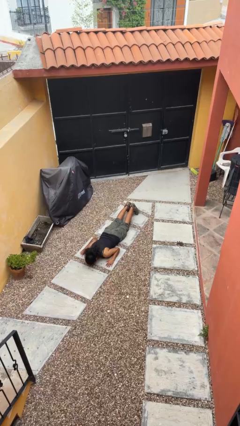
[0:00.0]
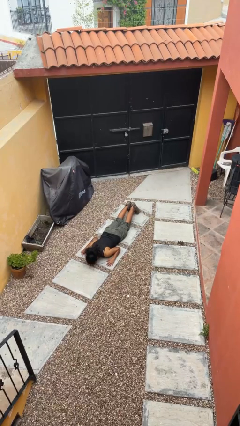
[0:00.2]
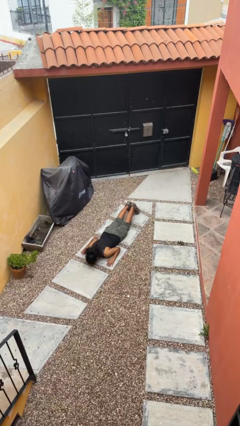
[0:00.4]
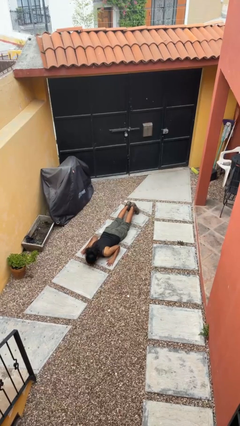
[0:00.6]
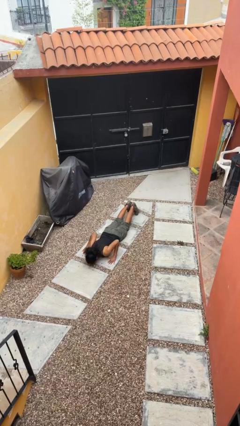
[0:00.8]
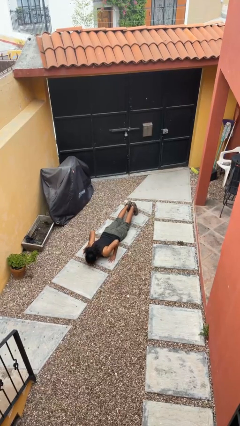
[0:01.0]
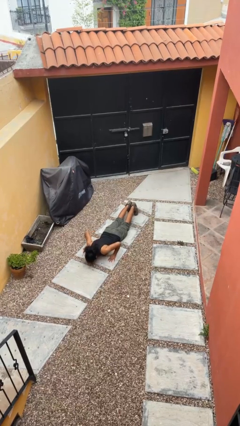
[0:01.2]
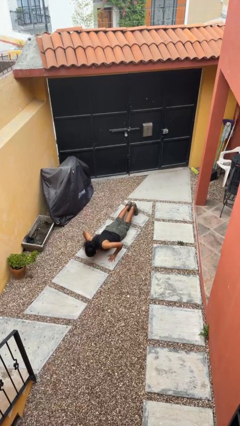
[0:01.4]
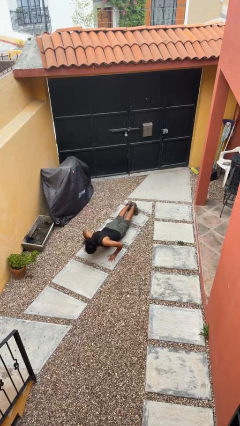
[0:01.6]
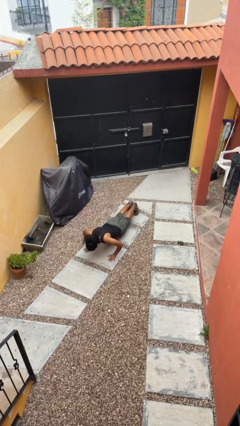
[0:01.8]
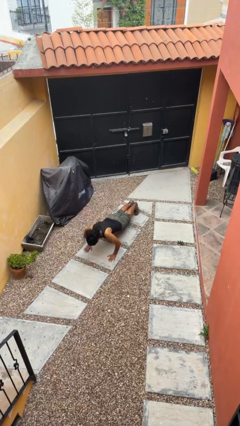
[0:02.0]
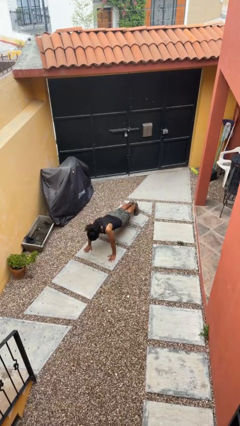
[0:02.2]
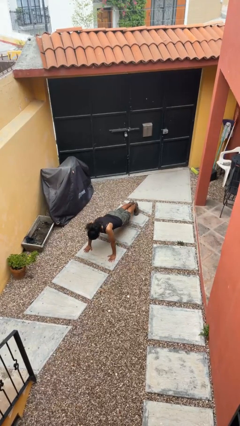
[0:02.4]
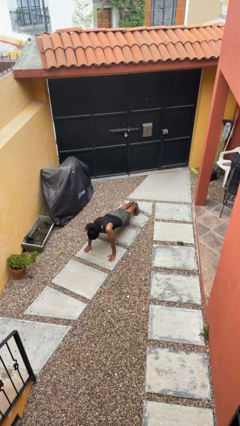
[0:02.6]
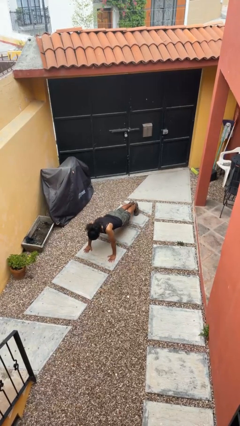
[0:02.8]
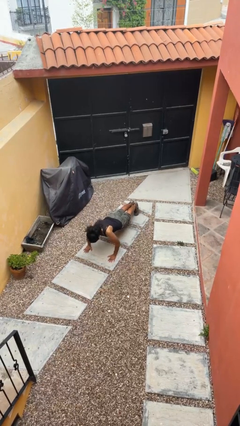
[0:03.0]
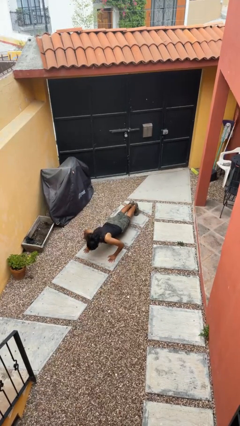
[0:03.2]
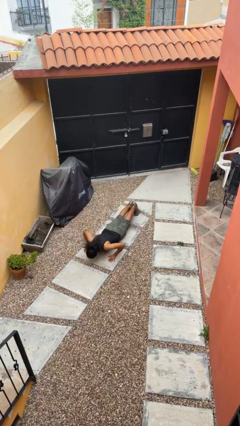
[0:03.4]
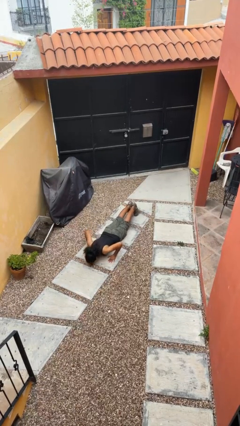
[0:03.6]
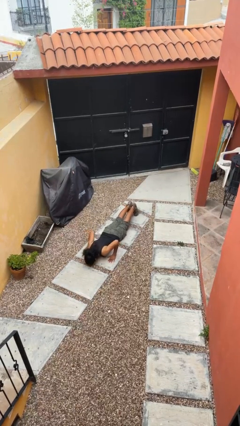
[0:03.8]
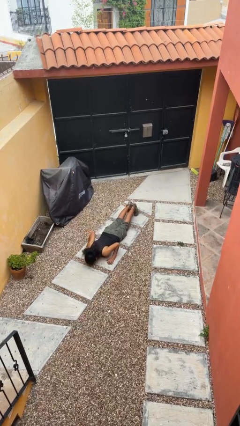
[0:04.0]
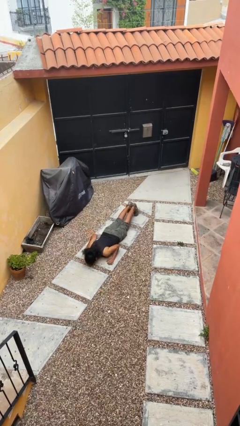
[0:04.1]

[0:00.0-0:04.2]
person exercises with pushup

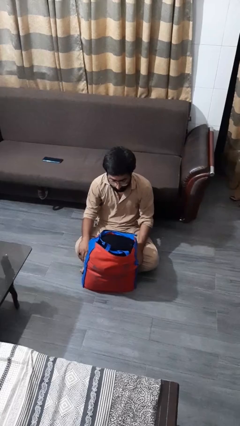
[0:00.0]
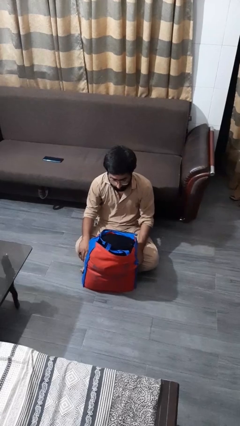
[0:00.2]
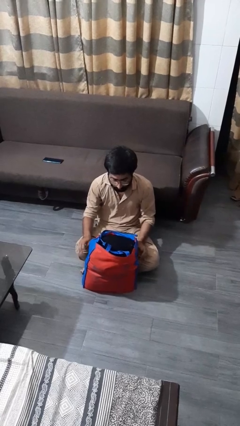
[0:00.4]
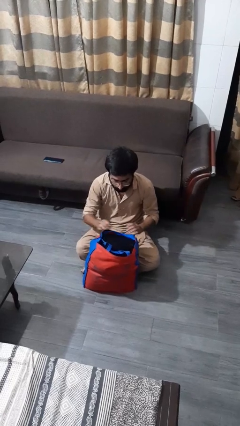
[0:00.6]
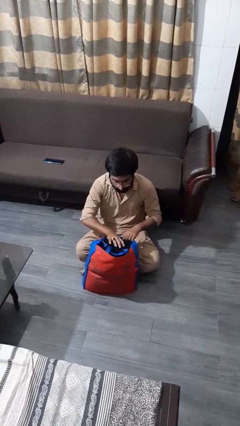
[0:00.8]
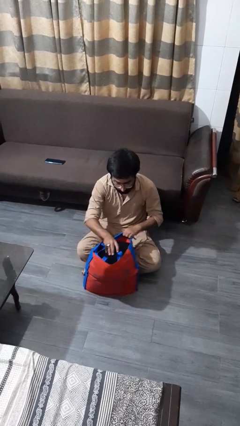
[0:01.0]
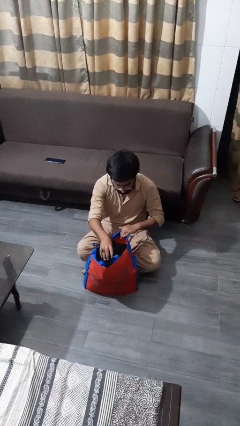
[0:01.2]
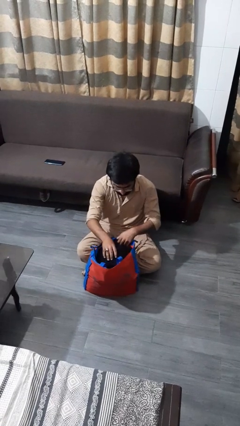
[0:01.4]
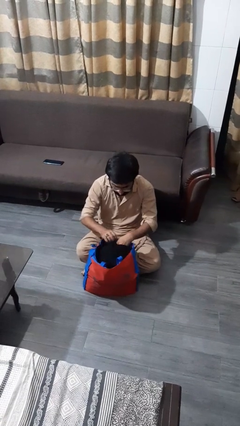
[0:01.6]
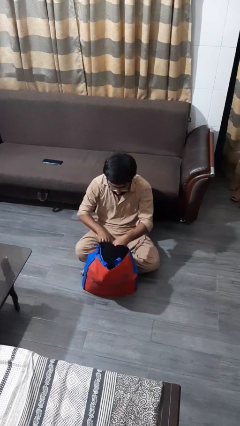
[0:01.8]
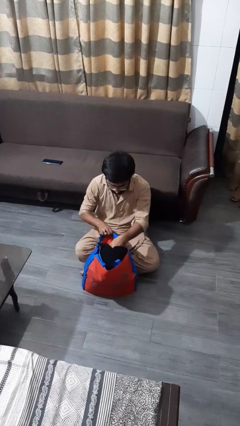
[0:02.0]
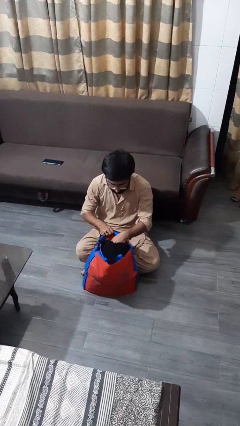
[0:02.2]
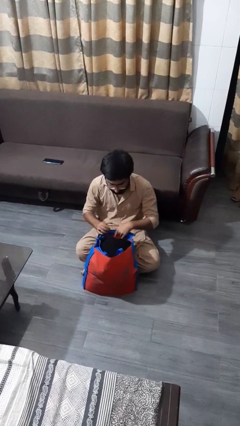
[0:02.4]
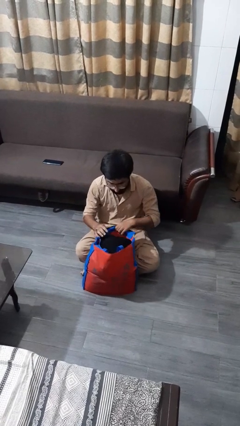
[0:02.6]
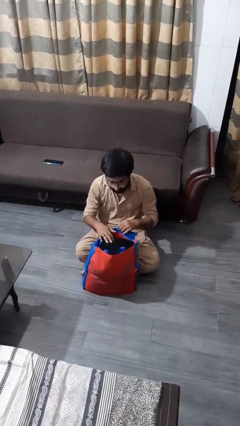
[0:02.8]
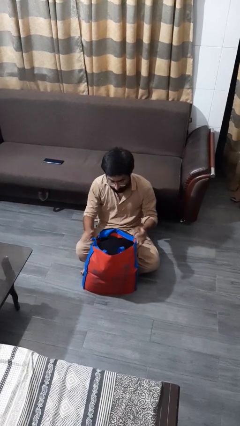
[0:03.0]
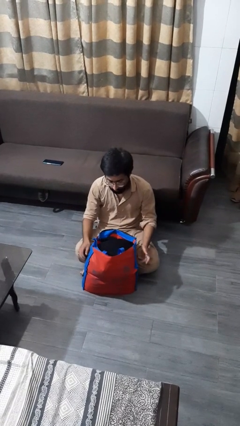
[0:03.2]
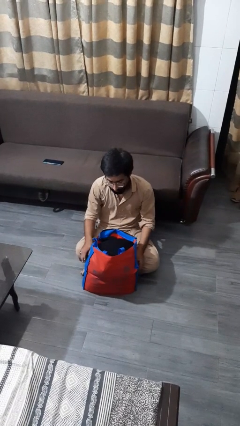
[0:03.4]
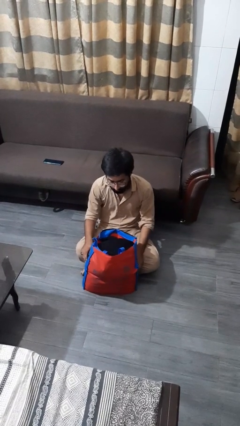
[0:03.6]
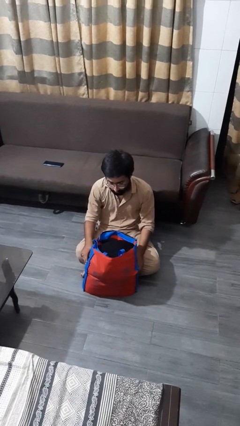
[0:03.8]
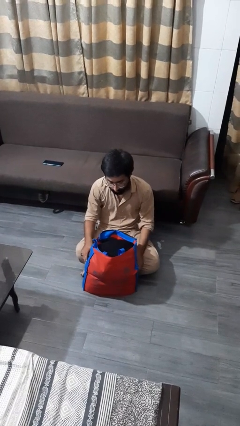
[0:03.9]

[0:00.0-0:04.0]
person searches in bag

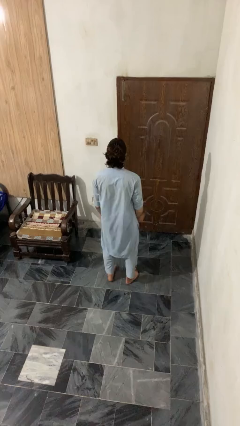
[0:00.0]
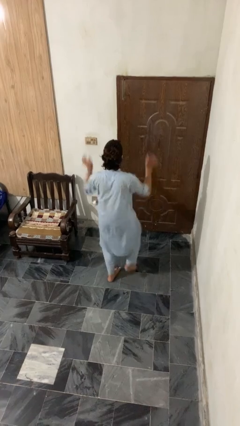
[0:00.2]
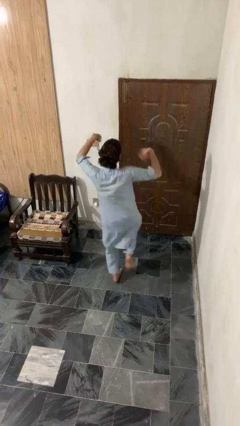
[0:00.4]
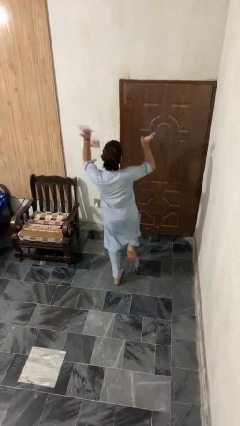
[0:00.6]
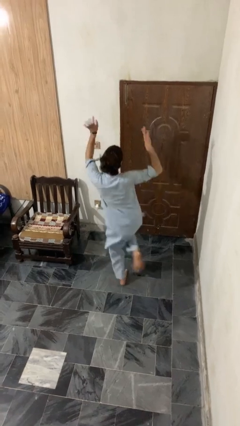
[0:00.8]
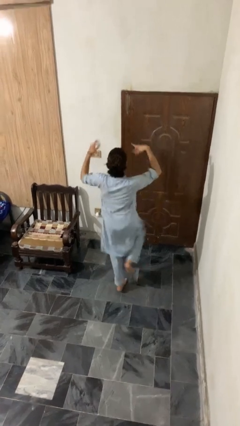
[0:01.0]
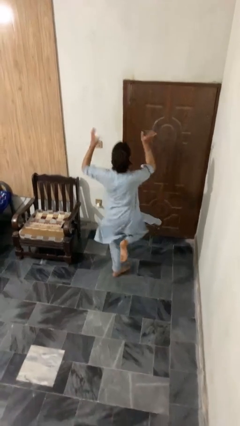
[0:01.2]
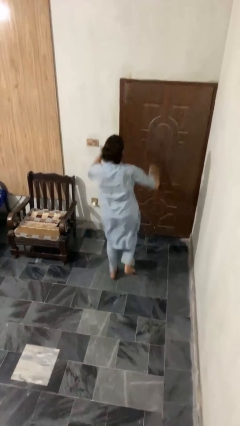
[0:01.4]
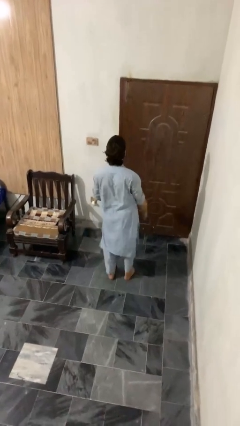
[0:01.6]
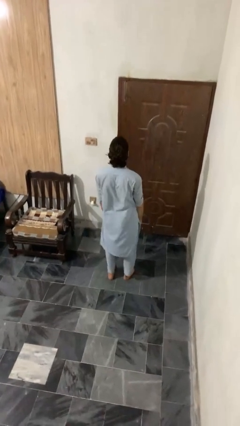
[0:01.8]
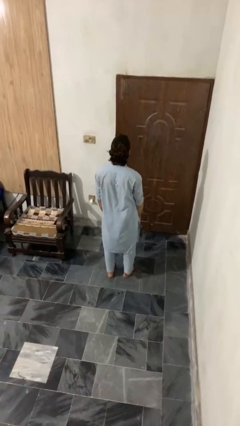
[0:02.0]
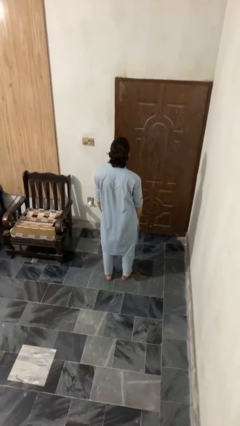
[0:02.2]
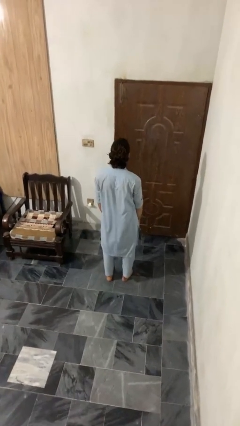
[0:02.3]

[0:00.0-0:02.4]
person dances in place

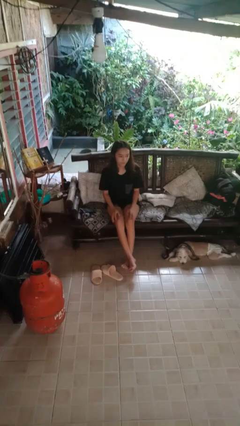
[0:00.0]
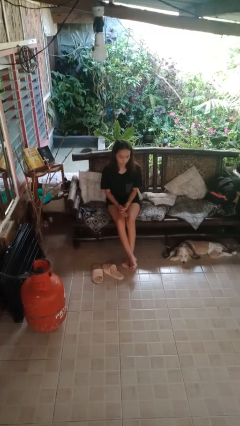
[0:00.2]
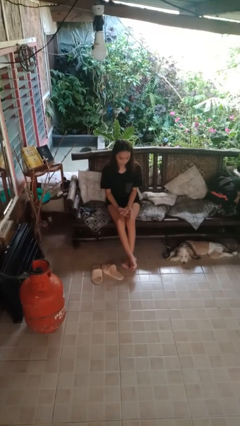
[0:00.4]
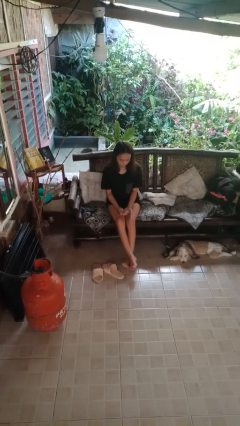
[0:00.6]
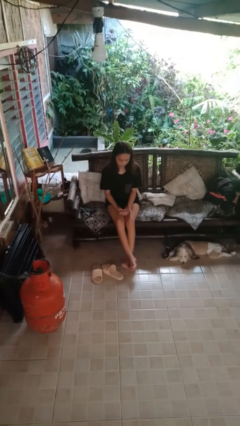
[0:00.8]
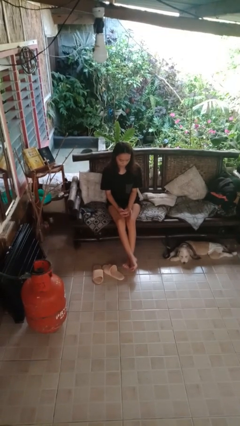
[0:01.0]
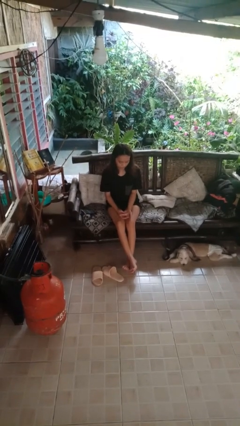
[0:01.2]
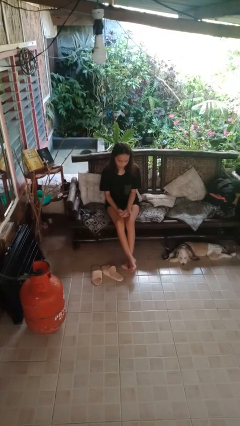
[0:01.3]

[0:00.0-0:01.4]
person looks at hands in lap

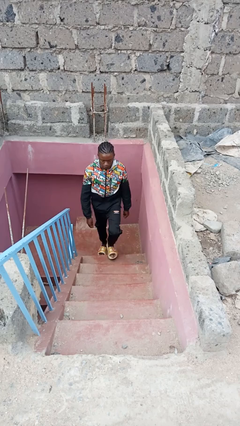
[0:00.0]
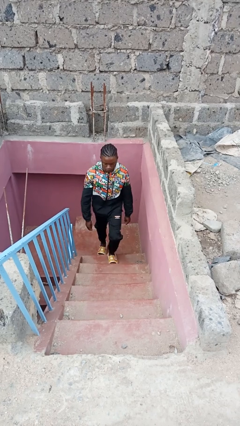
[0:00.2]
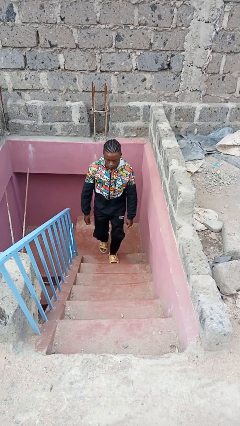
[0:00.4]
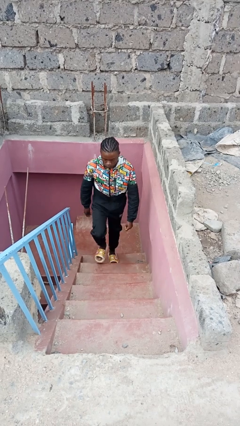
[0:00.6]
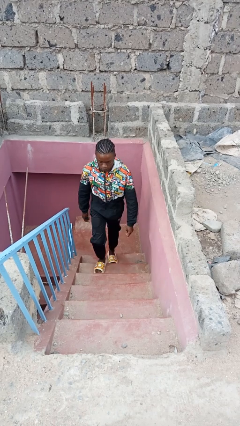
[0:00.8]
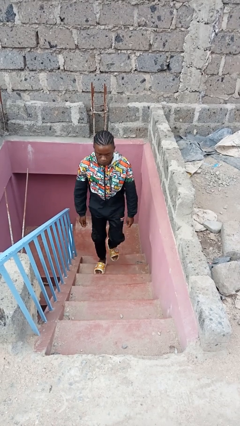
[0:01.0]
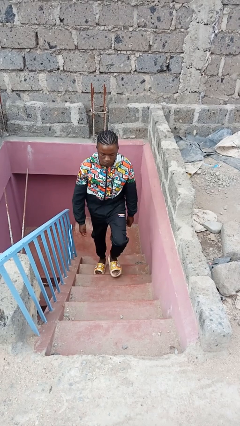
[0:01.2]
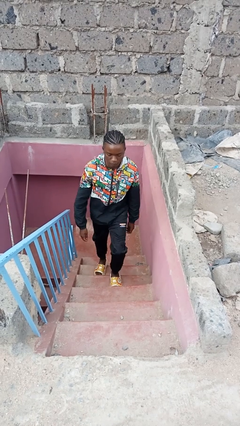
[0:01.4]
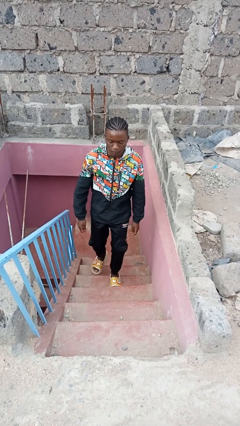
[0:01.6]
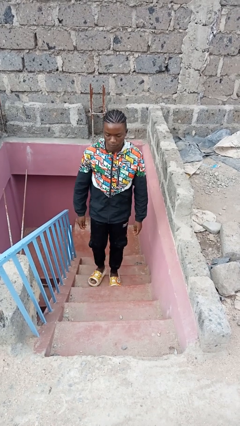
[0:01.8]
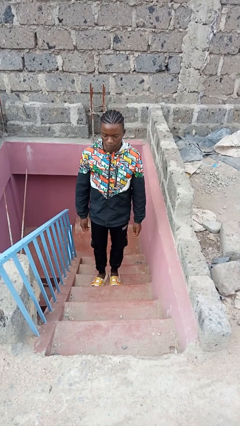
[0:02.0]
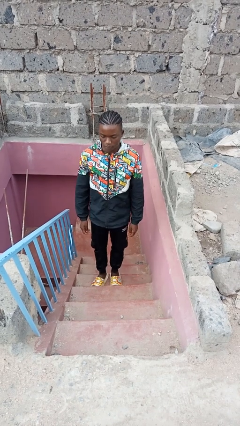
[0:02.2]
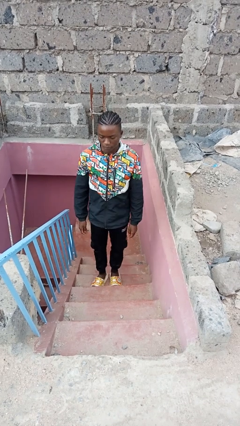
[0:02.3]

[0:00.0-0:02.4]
person climbs up stairs

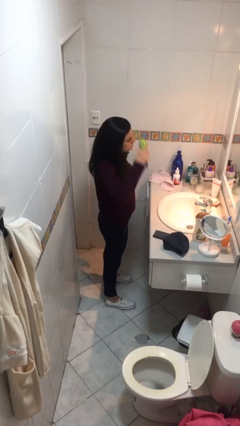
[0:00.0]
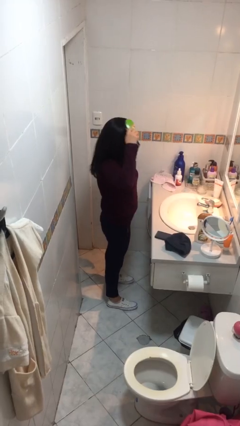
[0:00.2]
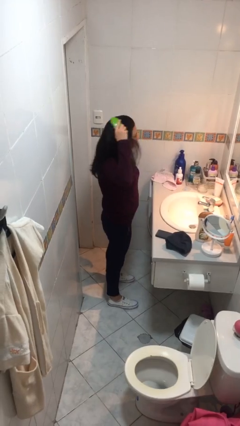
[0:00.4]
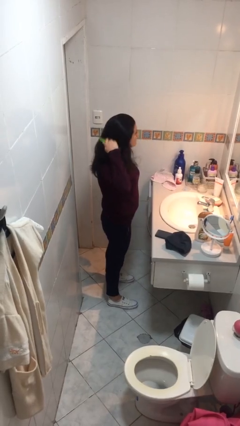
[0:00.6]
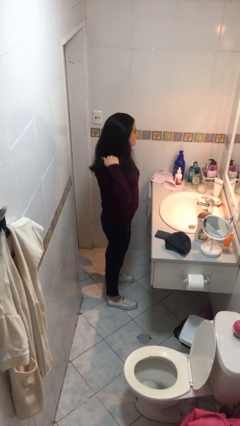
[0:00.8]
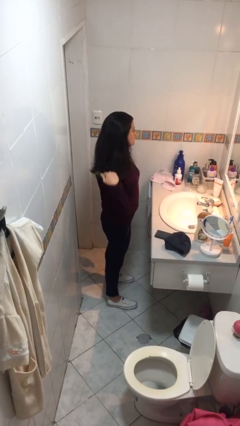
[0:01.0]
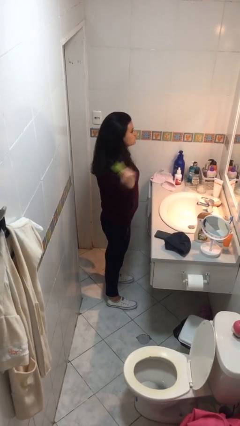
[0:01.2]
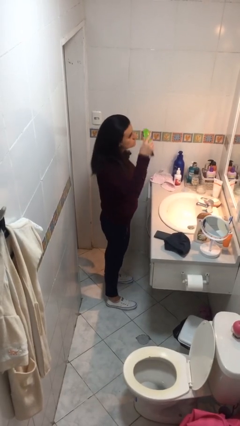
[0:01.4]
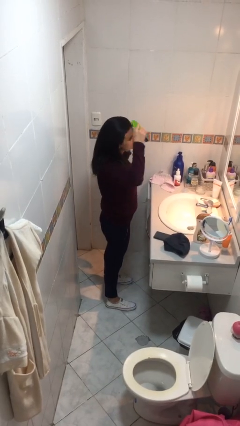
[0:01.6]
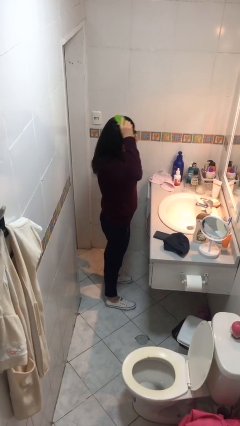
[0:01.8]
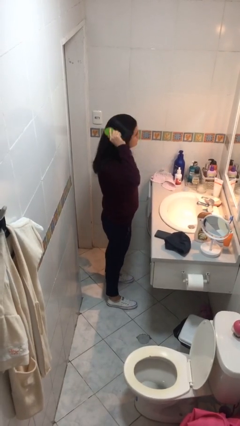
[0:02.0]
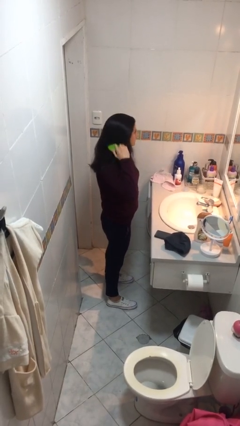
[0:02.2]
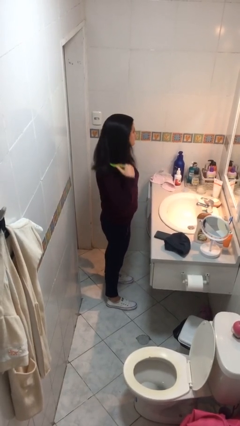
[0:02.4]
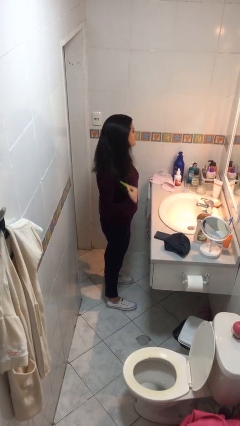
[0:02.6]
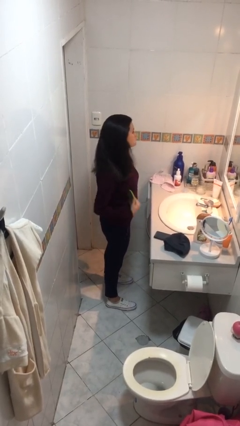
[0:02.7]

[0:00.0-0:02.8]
person brushes hair
